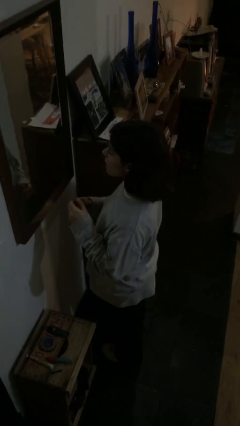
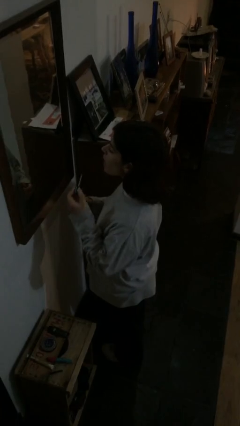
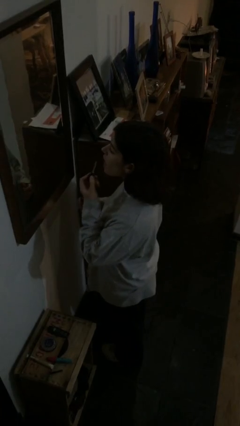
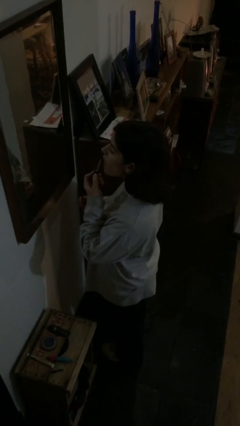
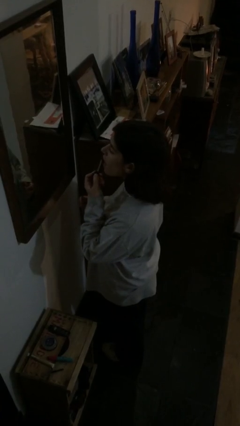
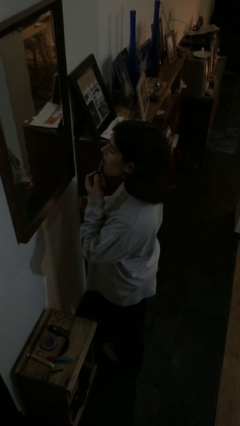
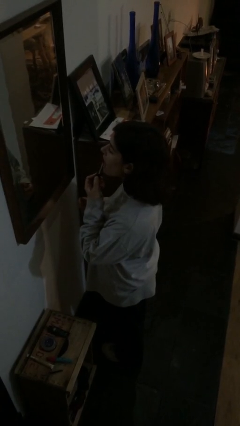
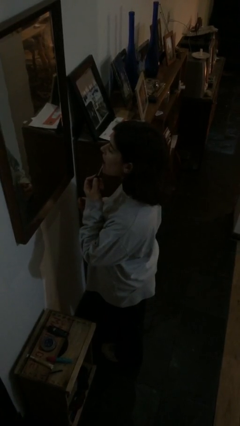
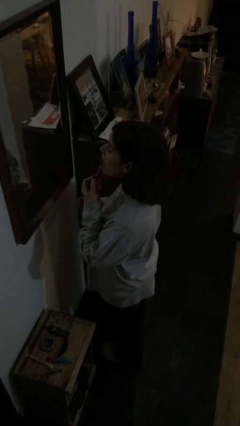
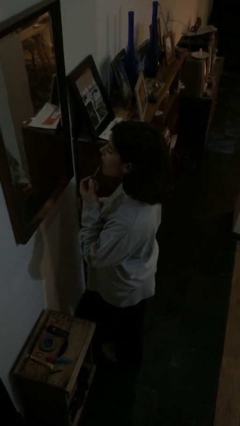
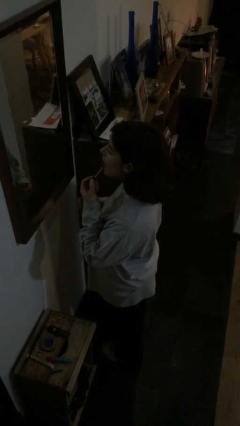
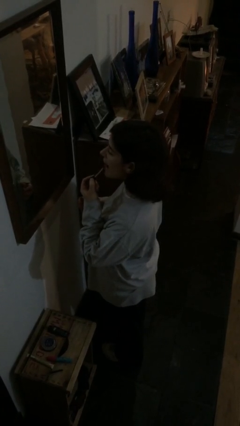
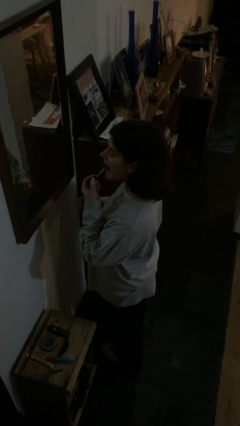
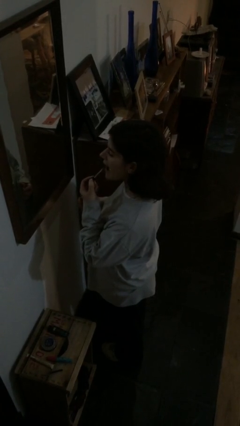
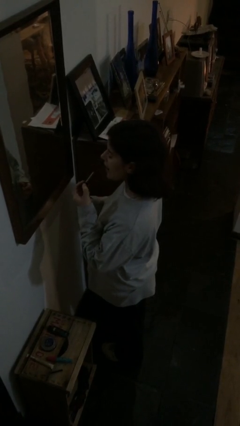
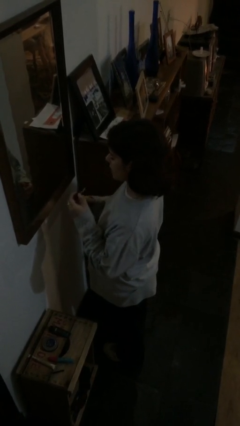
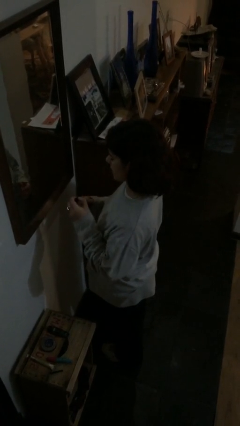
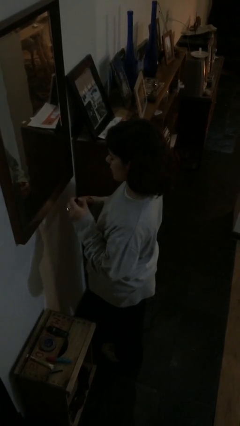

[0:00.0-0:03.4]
person applies lip makeup

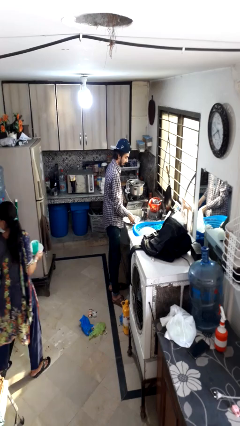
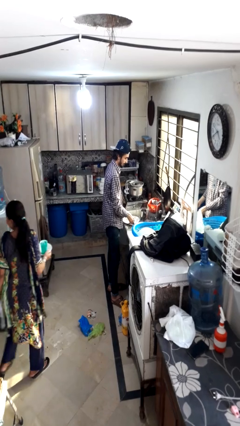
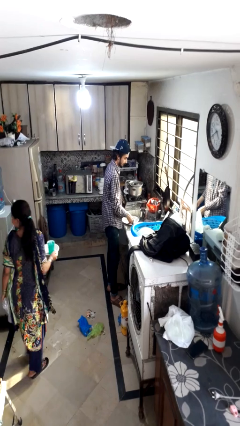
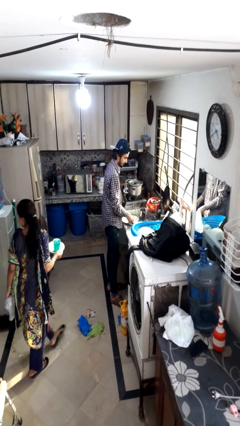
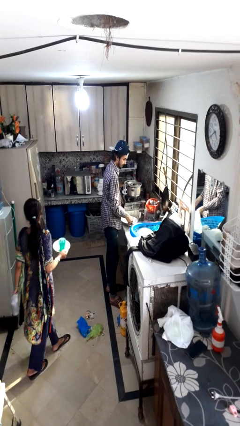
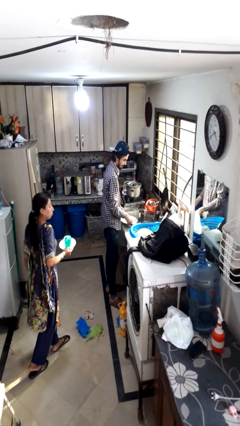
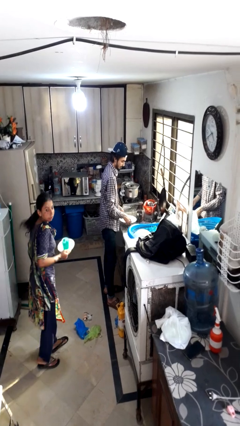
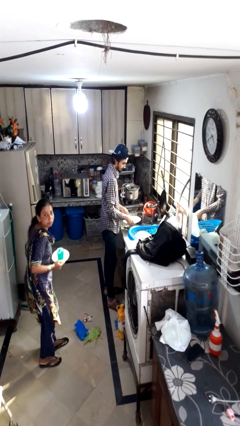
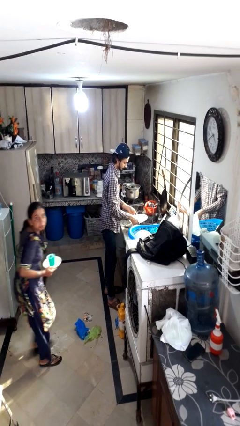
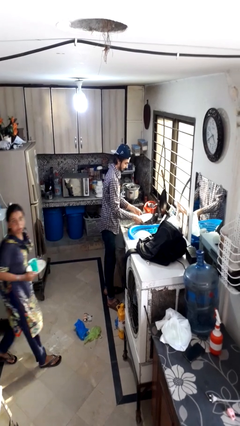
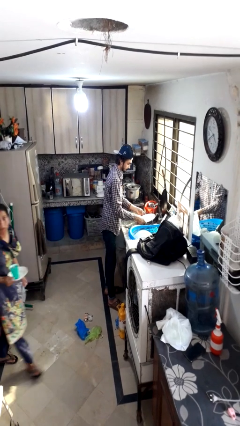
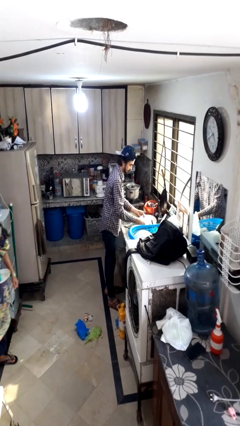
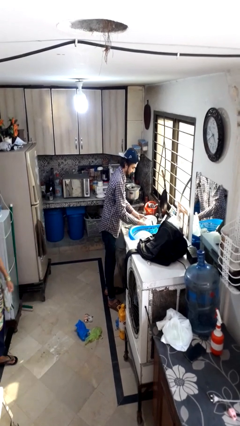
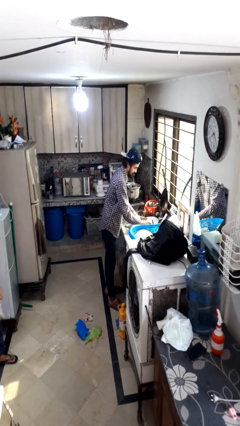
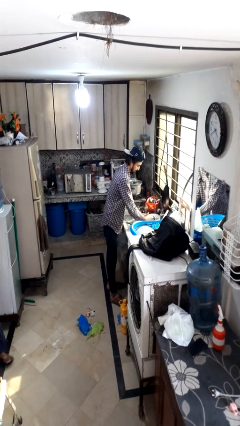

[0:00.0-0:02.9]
person washes dish

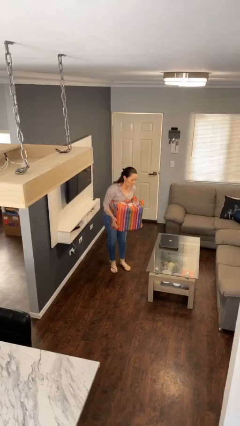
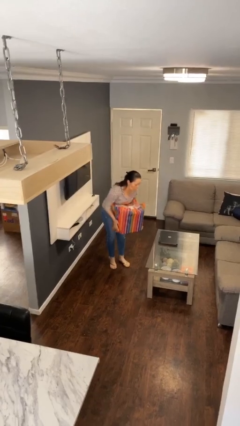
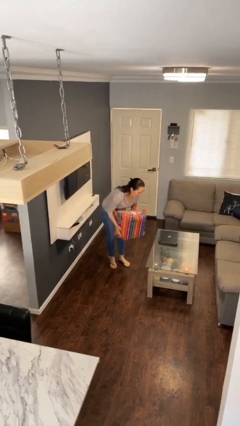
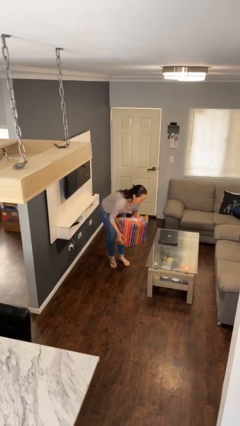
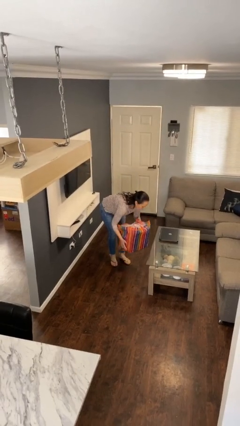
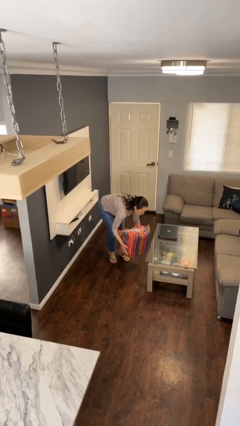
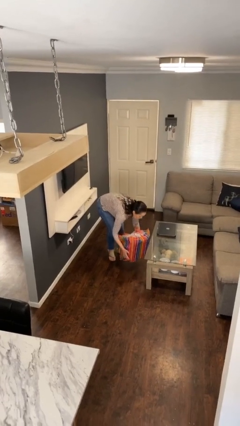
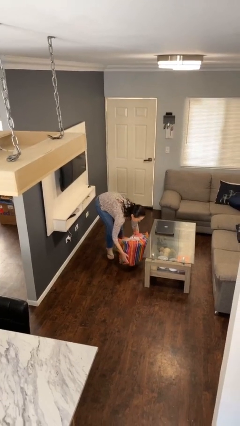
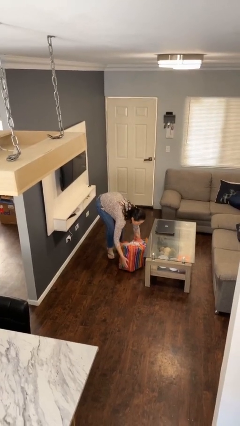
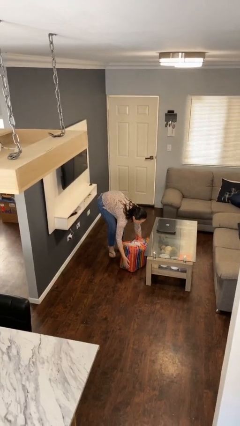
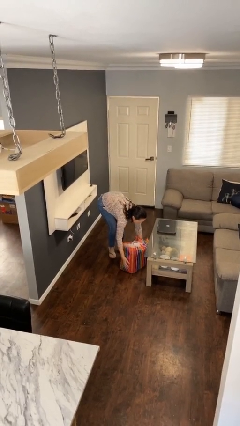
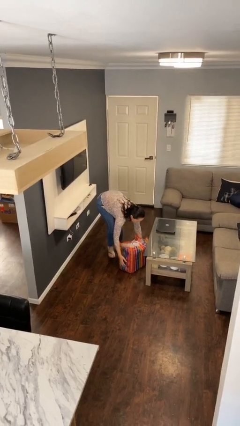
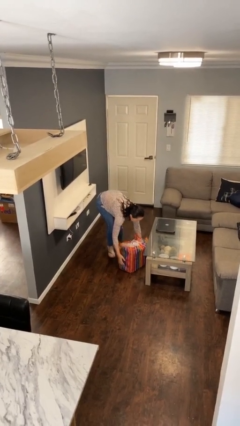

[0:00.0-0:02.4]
person puts down object on floor

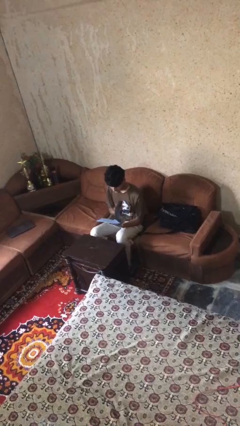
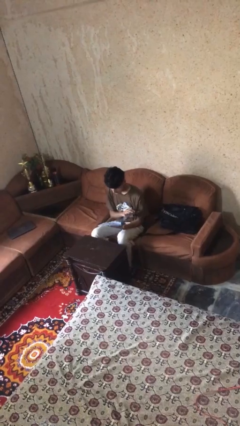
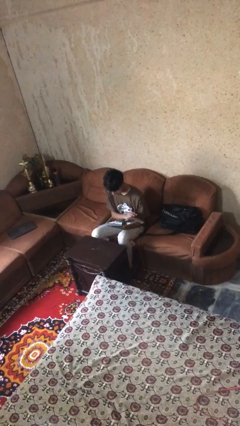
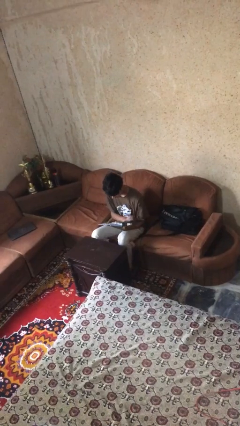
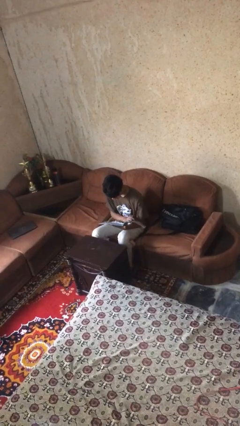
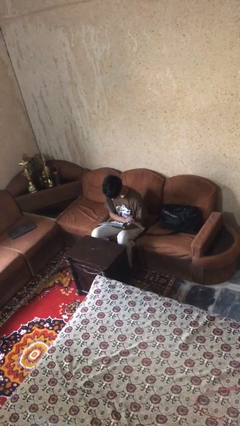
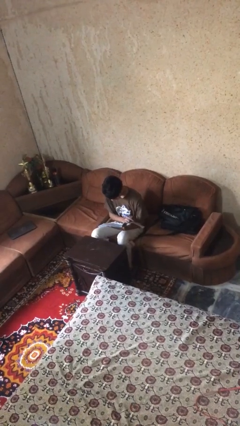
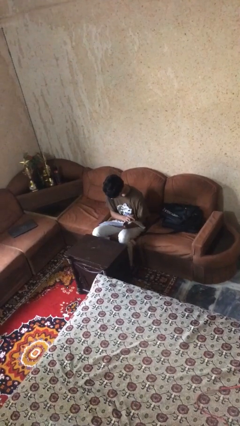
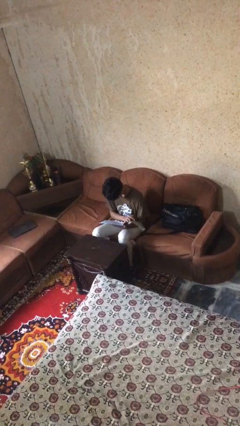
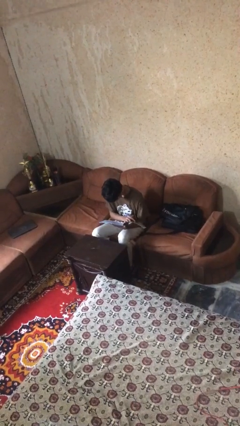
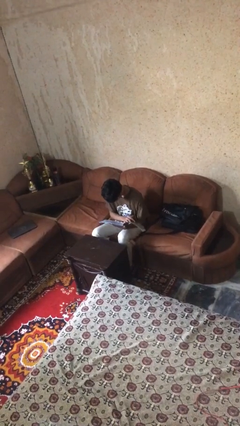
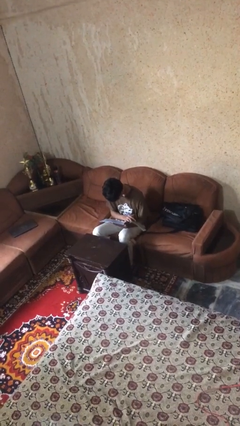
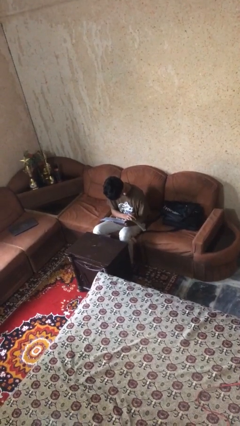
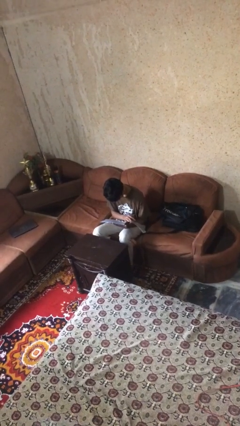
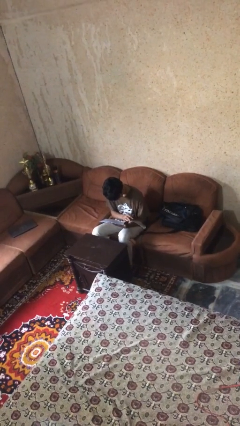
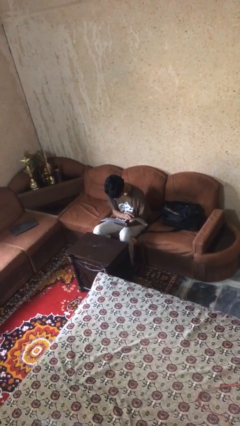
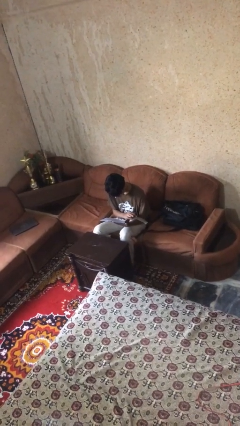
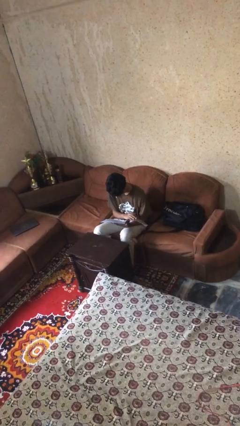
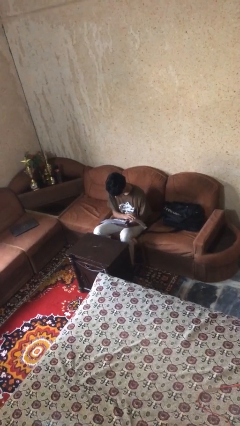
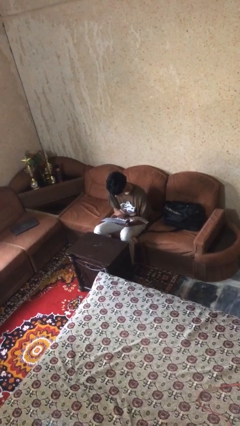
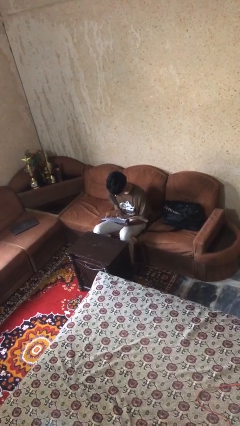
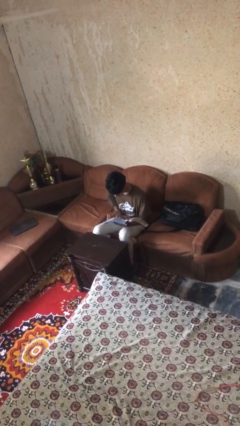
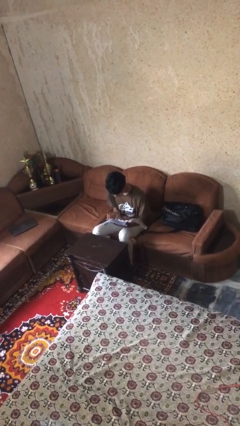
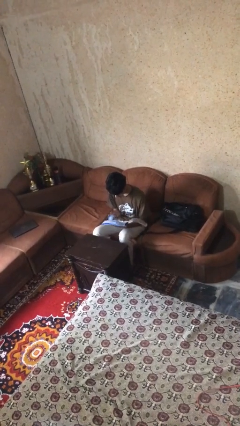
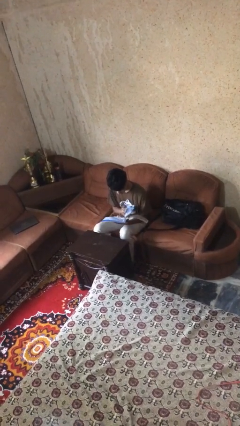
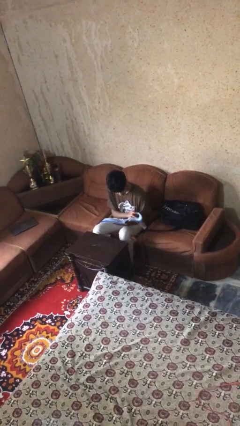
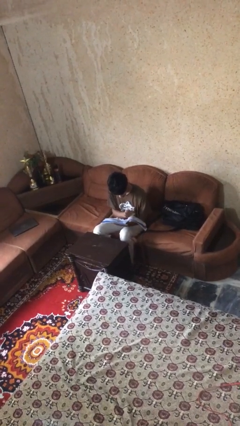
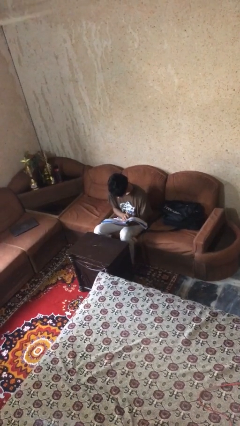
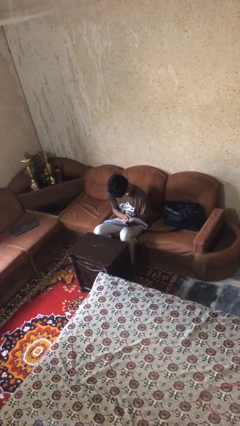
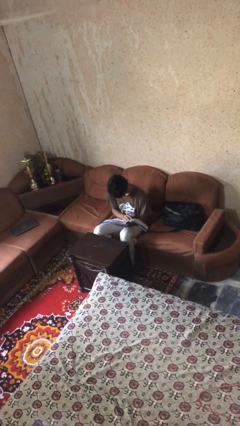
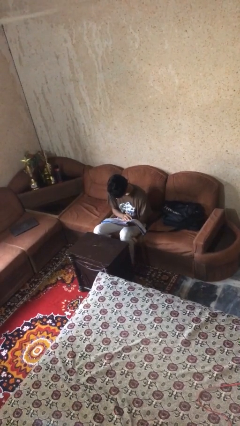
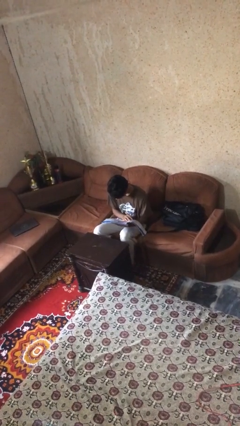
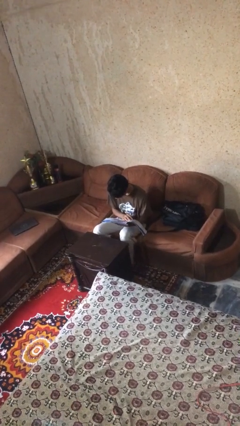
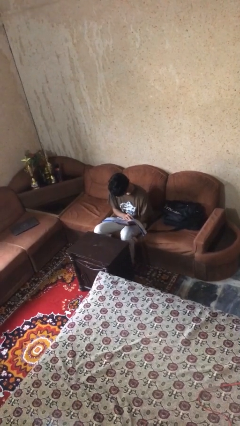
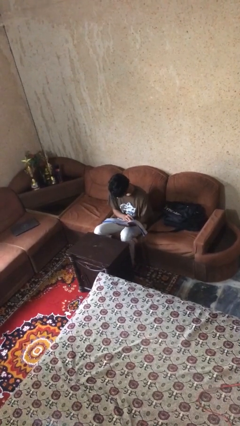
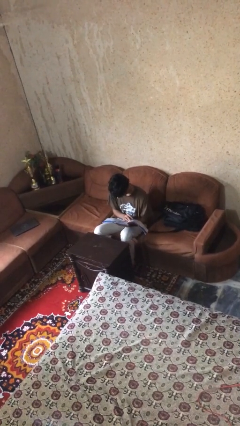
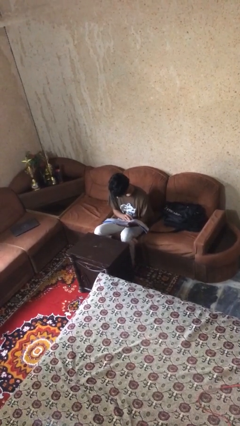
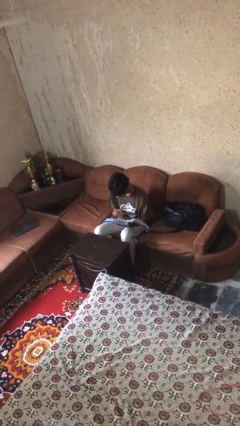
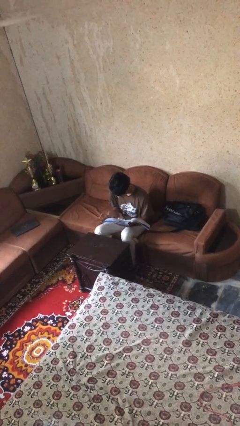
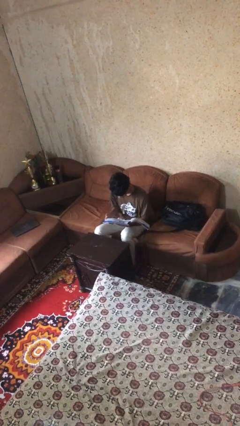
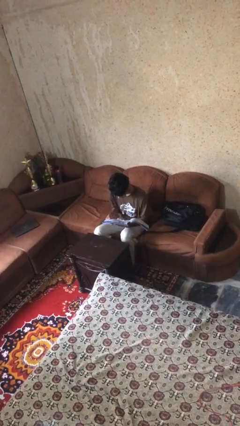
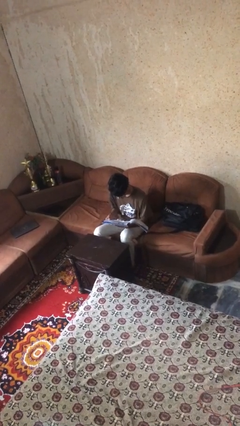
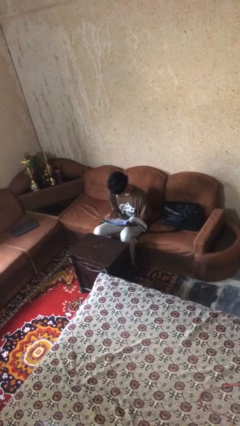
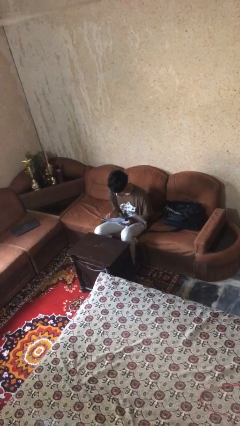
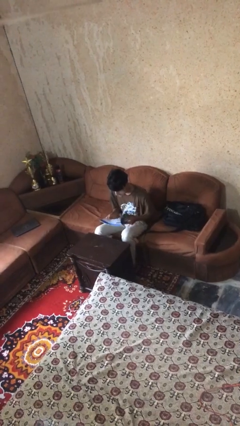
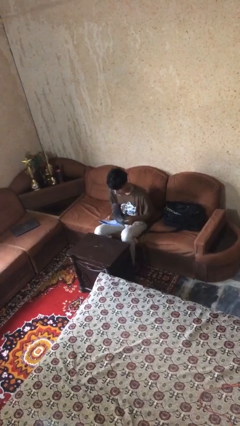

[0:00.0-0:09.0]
person reads document

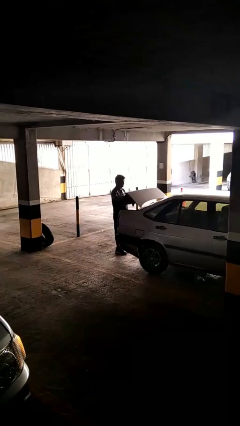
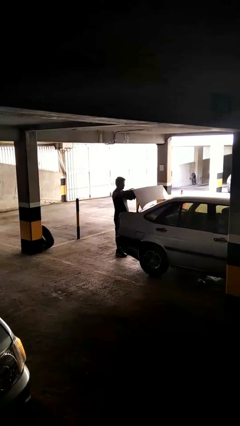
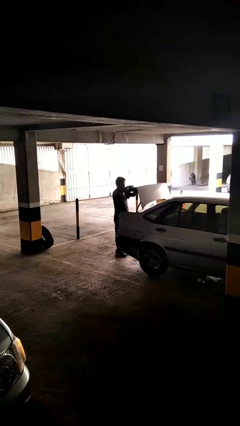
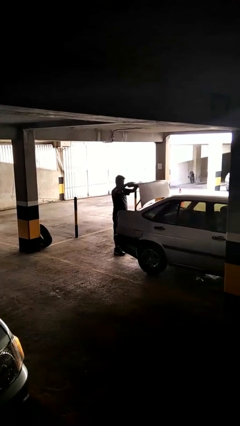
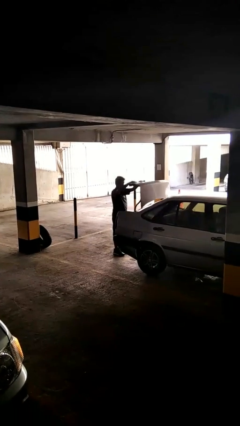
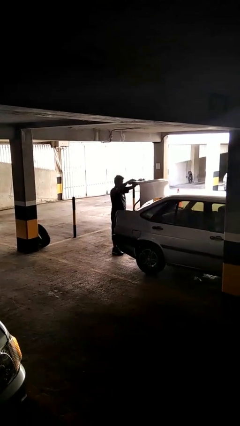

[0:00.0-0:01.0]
person opens car trunk
